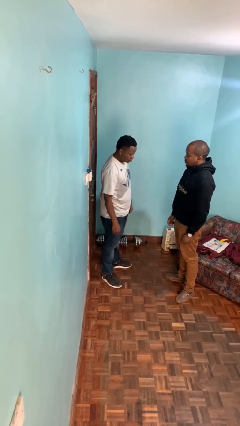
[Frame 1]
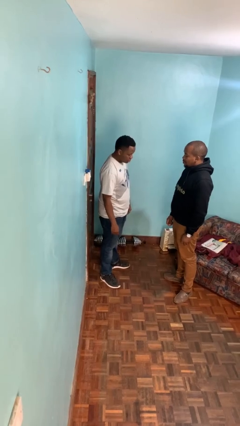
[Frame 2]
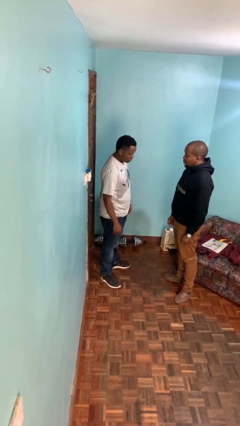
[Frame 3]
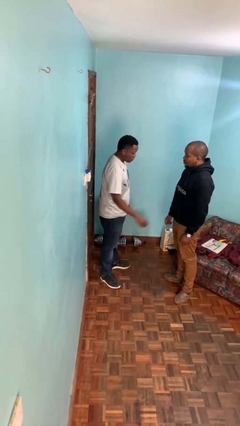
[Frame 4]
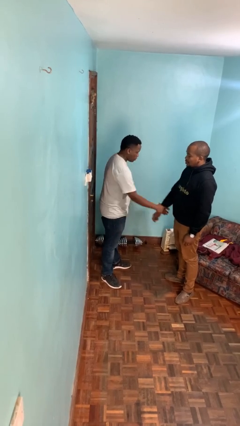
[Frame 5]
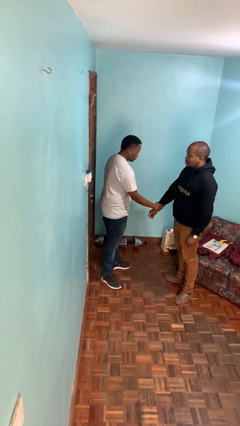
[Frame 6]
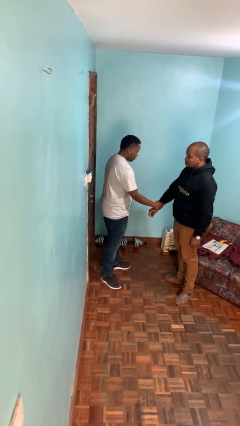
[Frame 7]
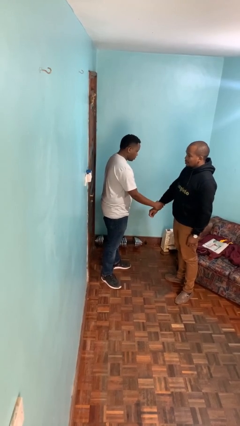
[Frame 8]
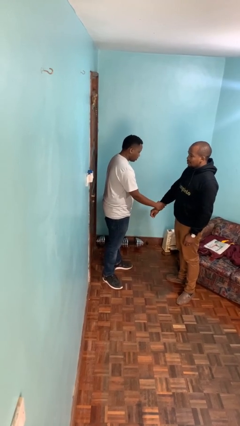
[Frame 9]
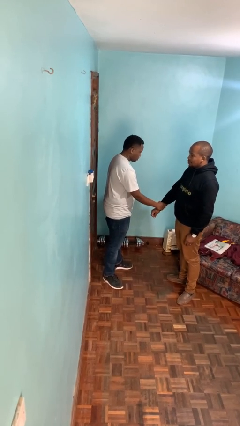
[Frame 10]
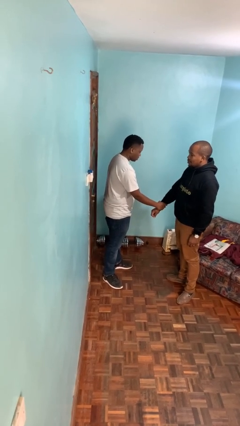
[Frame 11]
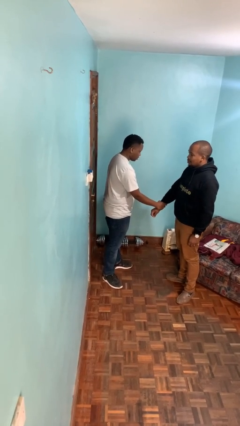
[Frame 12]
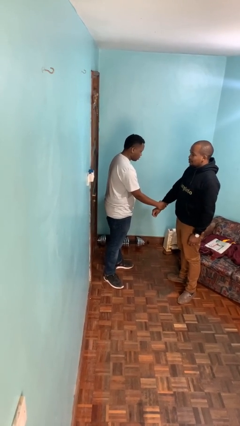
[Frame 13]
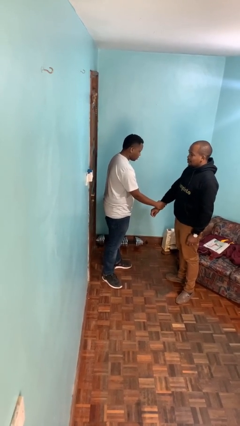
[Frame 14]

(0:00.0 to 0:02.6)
person grabs person by forearm

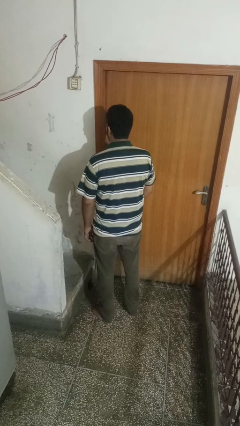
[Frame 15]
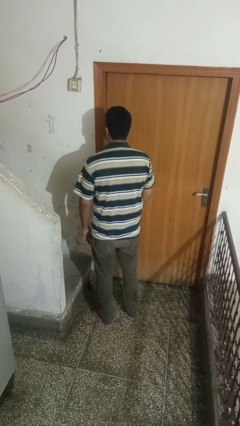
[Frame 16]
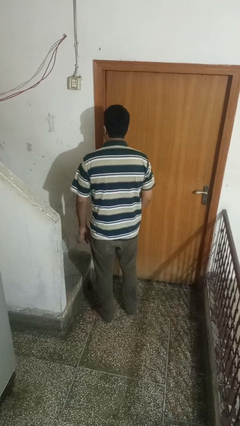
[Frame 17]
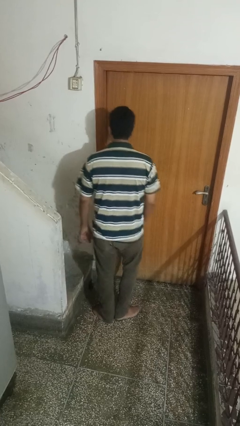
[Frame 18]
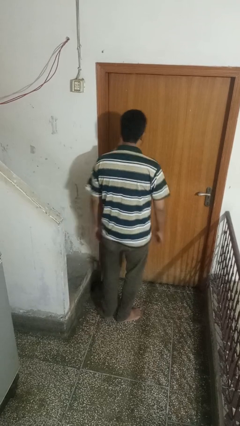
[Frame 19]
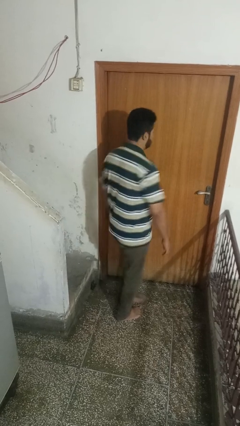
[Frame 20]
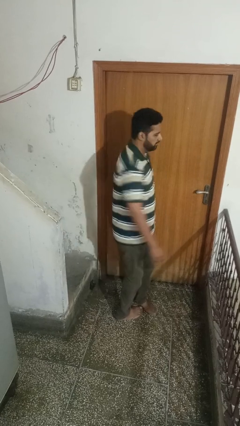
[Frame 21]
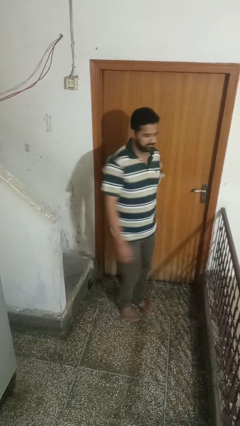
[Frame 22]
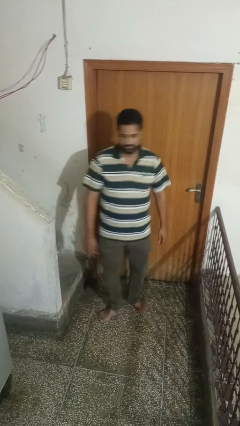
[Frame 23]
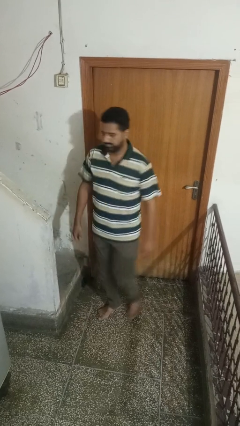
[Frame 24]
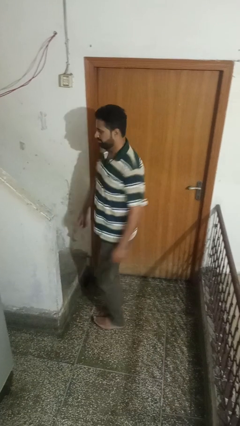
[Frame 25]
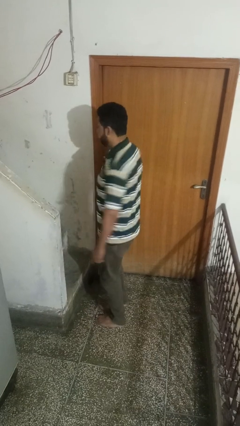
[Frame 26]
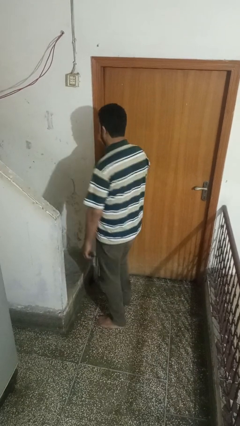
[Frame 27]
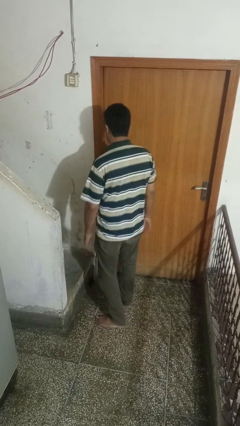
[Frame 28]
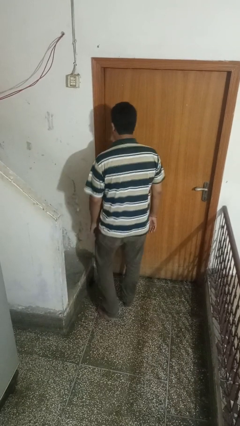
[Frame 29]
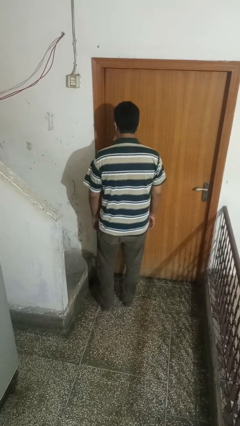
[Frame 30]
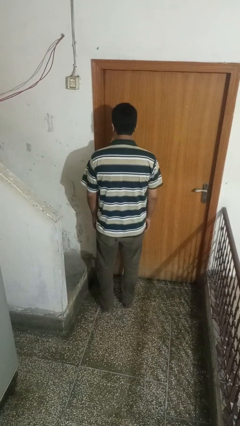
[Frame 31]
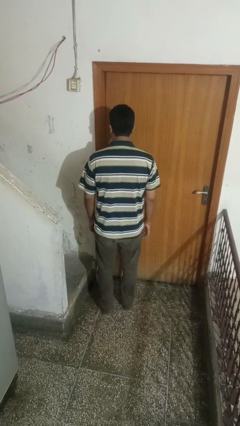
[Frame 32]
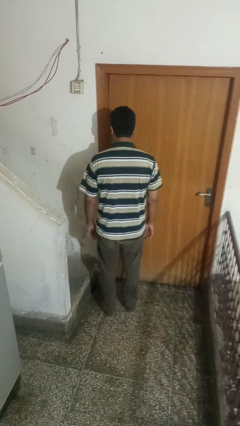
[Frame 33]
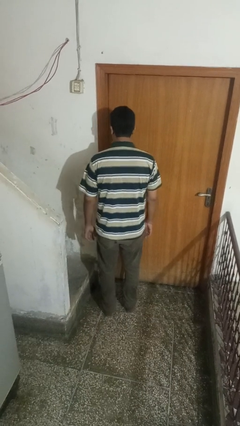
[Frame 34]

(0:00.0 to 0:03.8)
person twirls

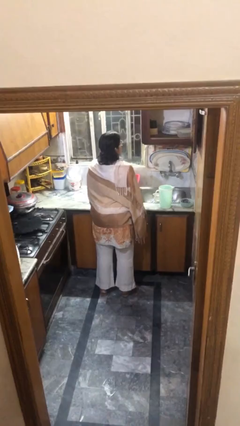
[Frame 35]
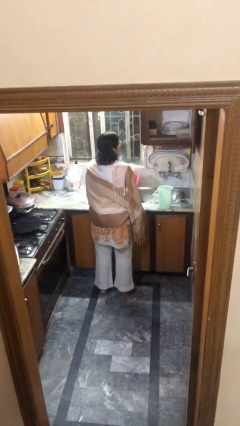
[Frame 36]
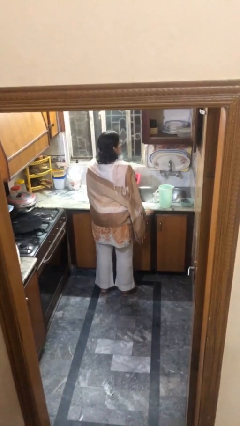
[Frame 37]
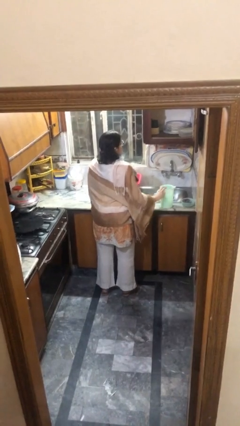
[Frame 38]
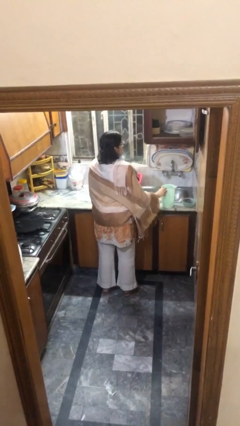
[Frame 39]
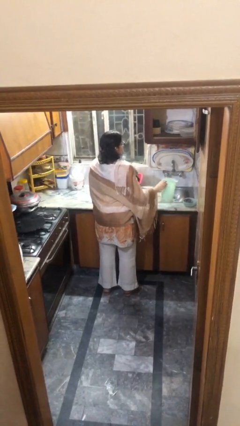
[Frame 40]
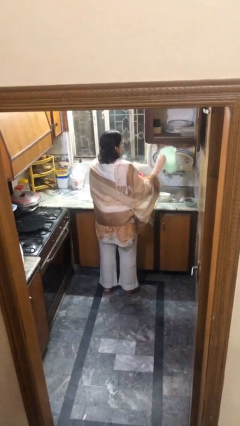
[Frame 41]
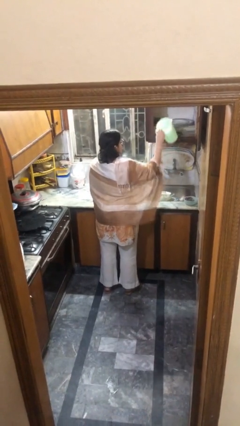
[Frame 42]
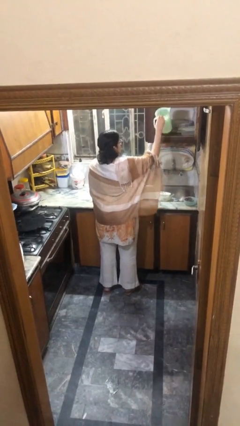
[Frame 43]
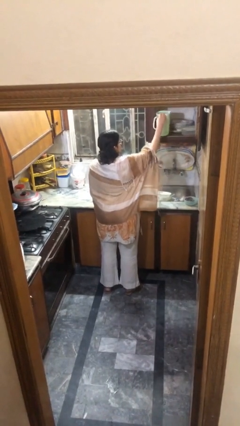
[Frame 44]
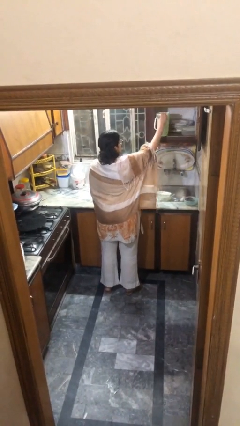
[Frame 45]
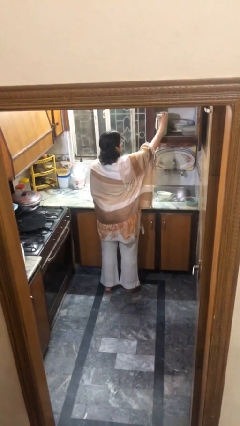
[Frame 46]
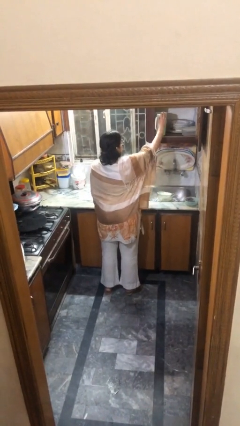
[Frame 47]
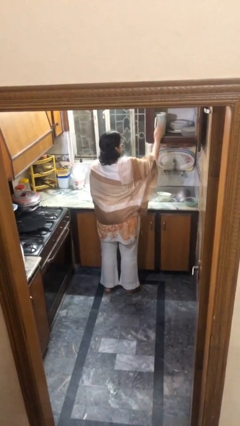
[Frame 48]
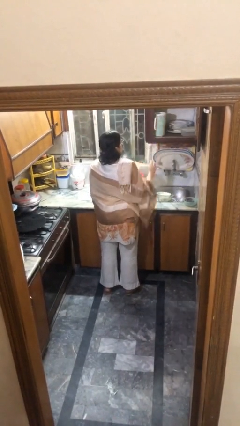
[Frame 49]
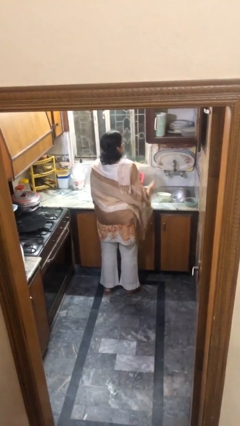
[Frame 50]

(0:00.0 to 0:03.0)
person puts object into kitchen drawer

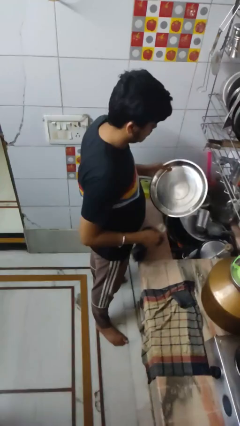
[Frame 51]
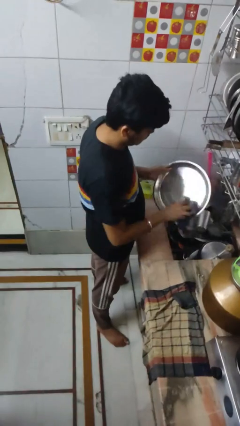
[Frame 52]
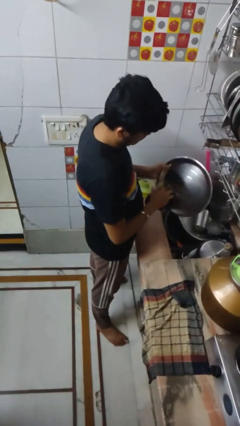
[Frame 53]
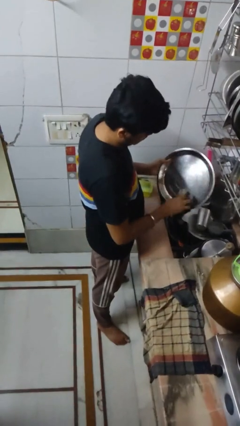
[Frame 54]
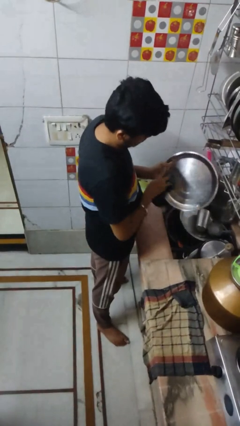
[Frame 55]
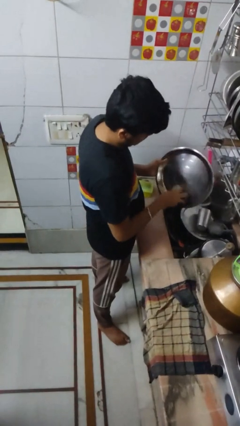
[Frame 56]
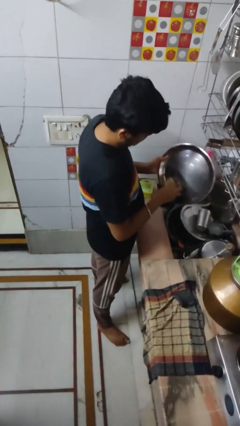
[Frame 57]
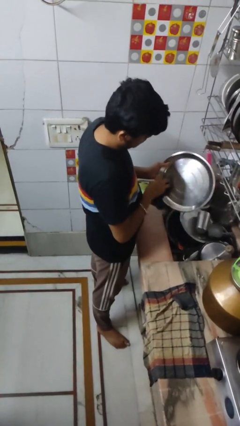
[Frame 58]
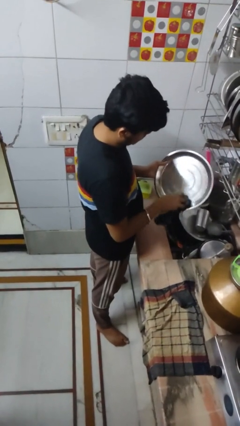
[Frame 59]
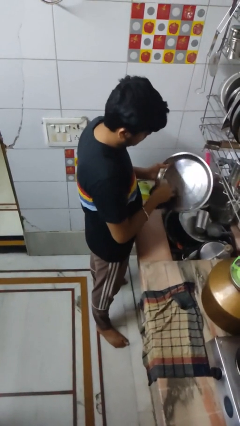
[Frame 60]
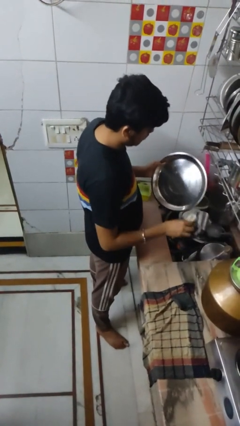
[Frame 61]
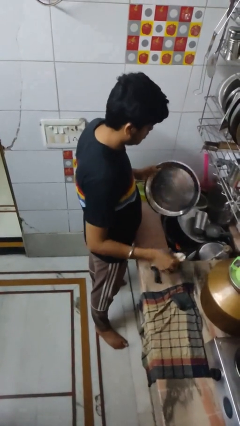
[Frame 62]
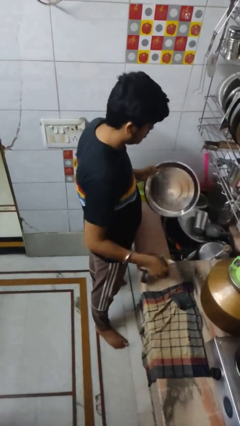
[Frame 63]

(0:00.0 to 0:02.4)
person dries dish

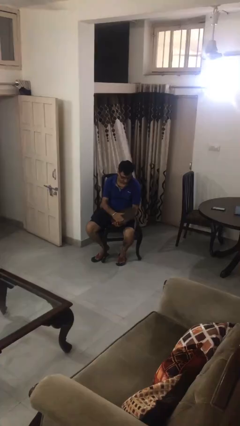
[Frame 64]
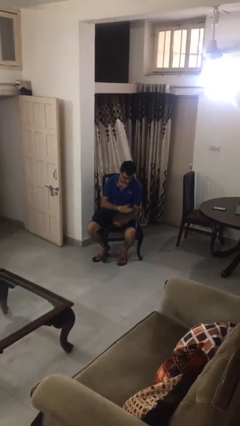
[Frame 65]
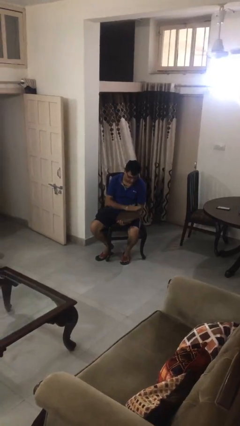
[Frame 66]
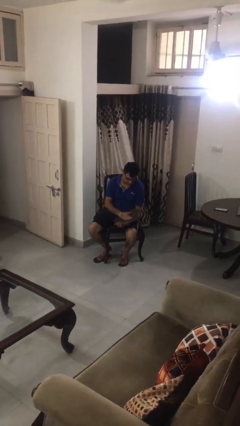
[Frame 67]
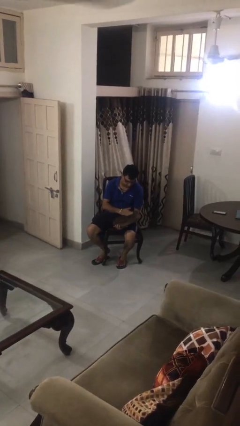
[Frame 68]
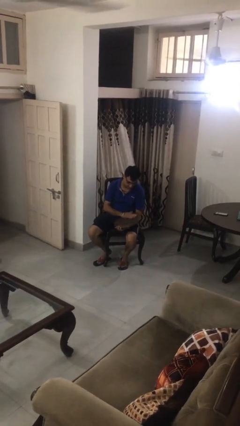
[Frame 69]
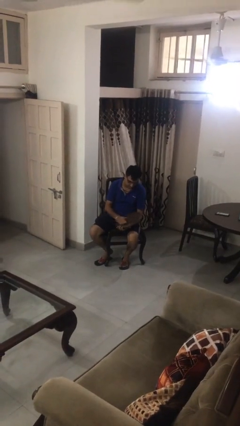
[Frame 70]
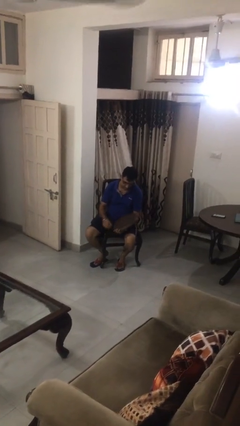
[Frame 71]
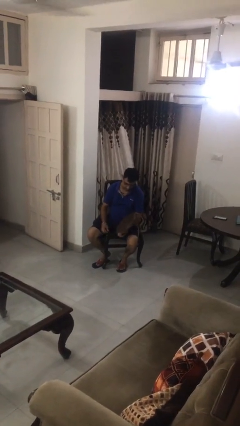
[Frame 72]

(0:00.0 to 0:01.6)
person waves hand over object

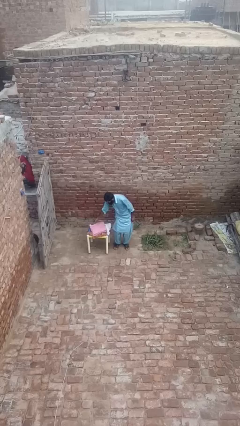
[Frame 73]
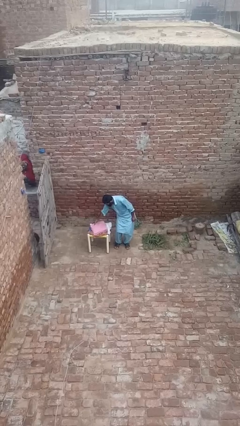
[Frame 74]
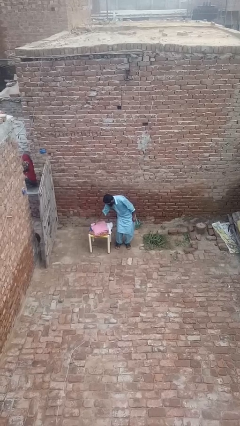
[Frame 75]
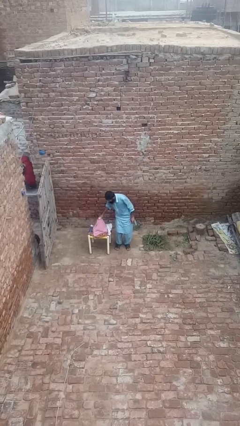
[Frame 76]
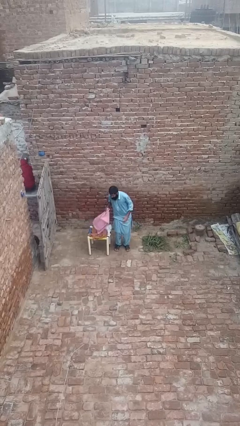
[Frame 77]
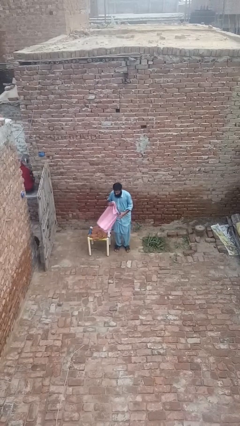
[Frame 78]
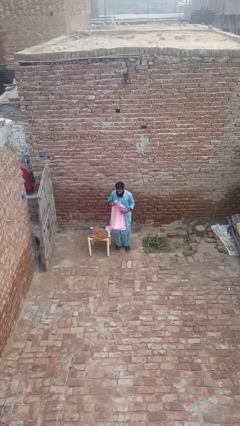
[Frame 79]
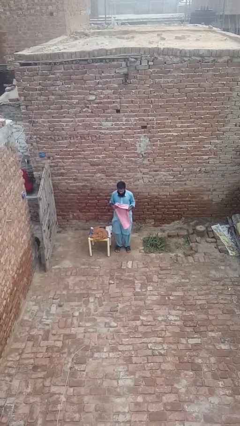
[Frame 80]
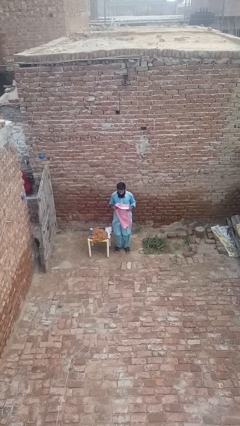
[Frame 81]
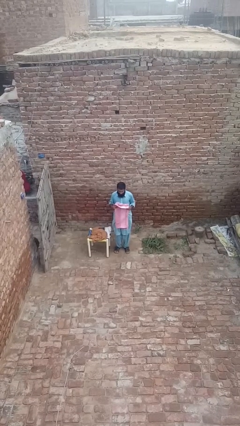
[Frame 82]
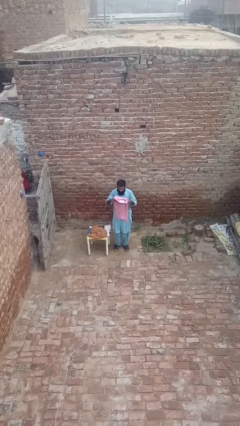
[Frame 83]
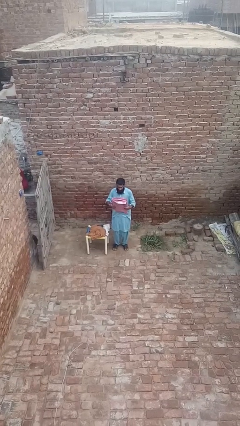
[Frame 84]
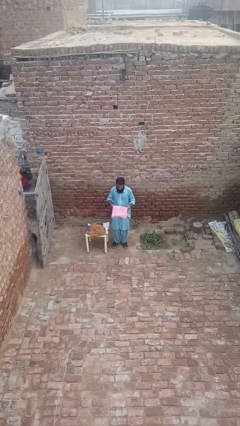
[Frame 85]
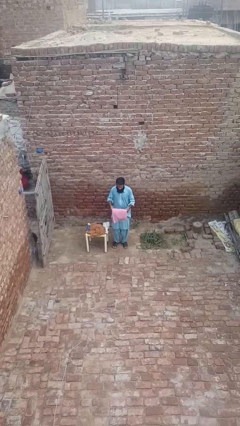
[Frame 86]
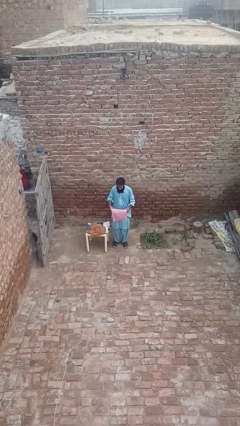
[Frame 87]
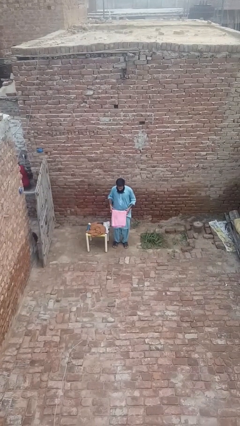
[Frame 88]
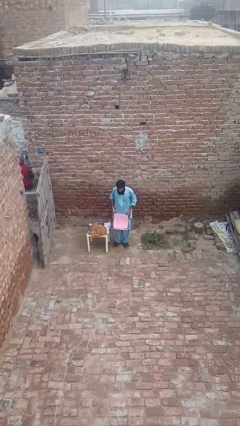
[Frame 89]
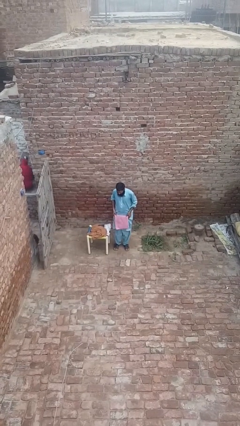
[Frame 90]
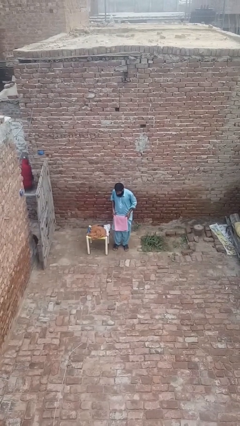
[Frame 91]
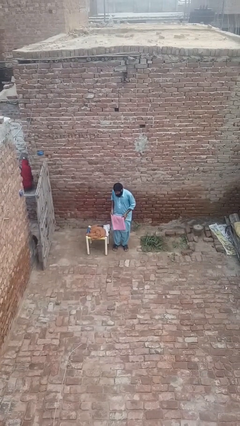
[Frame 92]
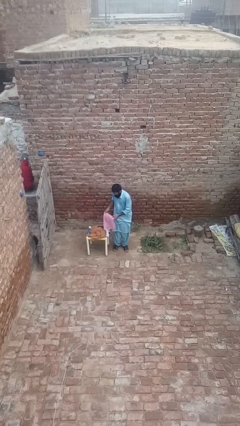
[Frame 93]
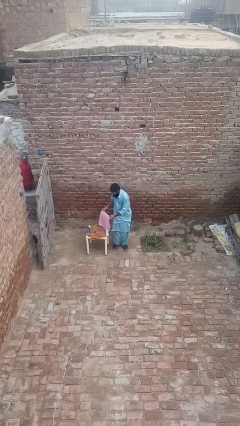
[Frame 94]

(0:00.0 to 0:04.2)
person folds towel
